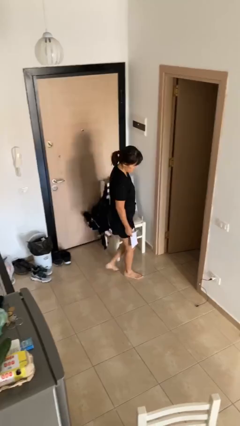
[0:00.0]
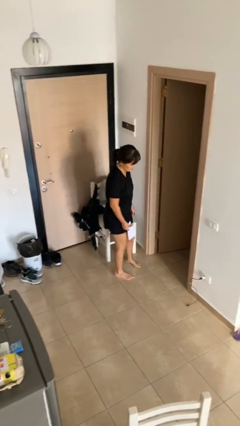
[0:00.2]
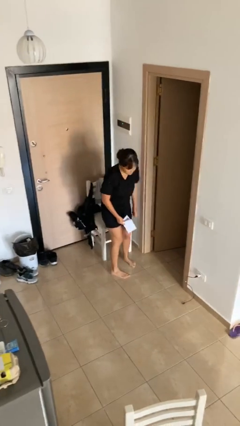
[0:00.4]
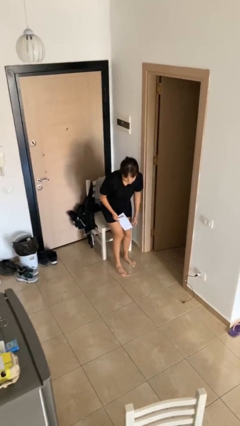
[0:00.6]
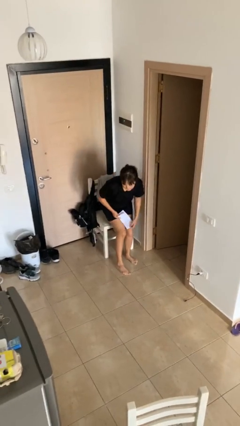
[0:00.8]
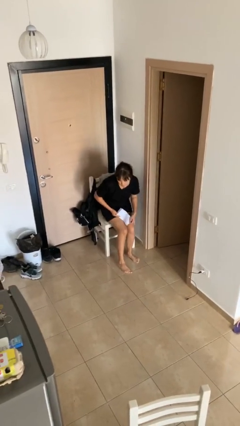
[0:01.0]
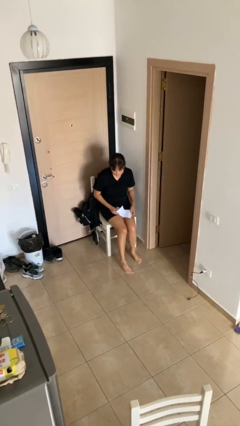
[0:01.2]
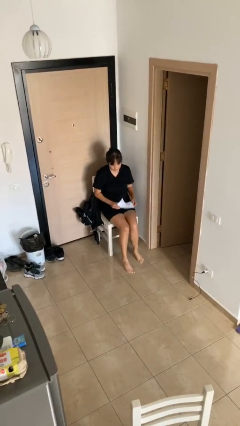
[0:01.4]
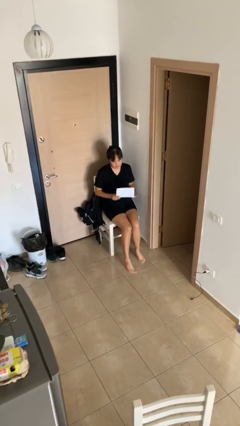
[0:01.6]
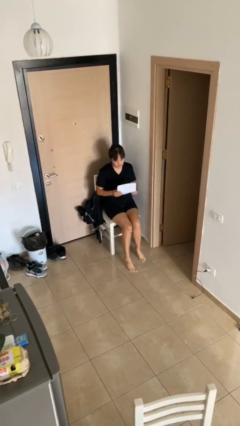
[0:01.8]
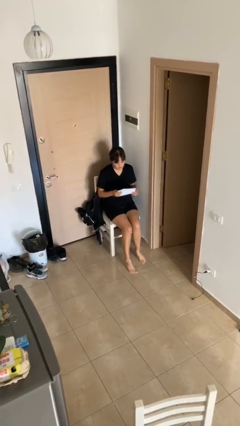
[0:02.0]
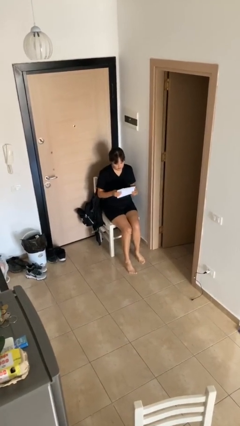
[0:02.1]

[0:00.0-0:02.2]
person sits down

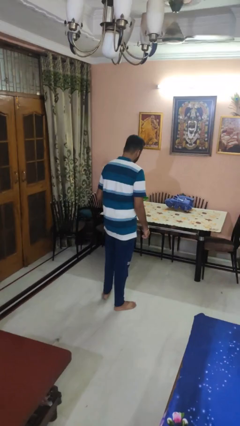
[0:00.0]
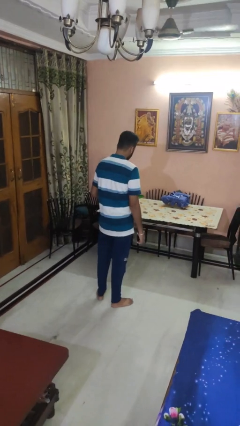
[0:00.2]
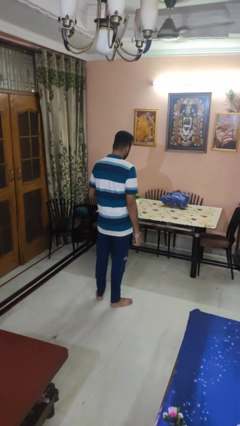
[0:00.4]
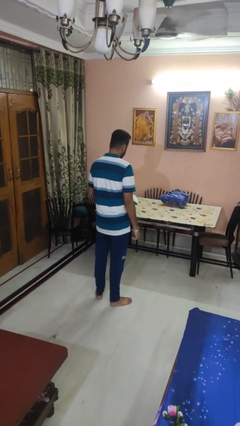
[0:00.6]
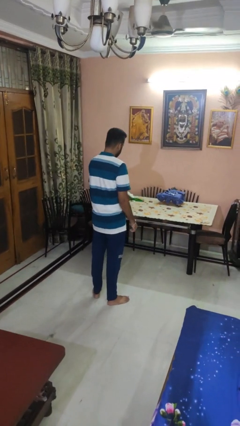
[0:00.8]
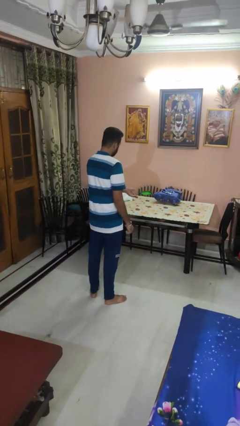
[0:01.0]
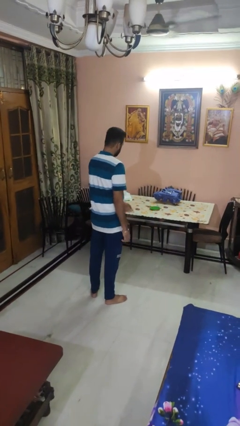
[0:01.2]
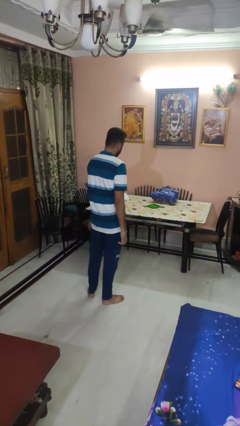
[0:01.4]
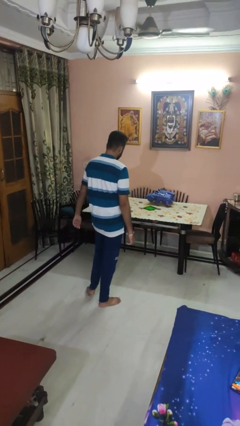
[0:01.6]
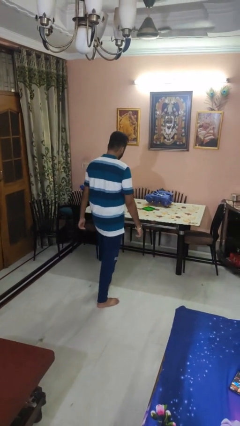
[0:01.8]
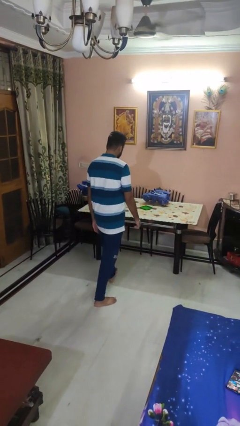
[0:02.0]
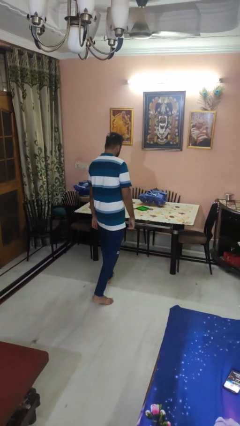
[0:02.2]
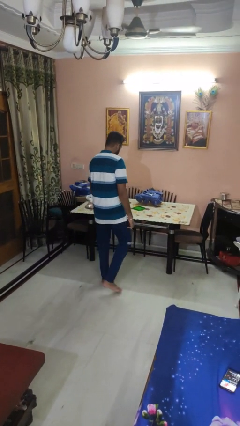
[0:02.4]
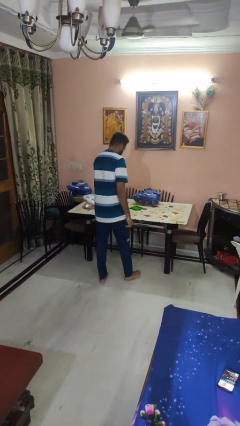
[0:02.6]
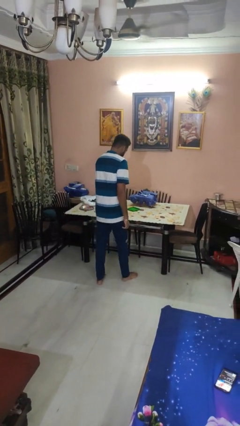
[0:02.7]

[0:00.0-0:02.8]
person throws object on table

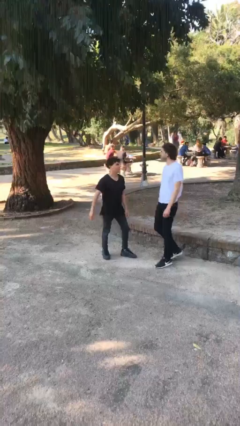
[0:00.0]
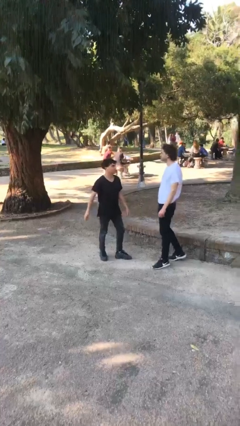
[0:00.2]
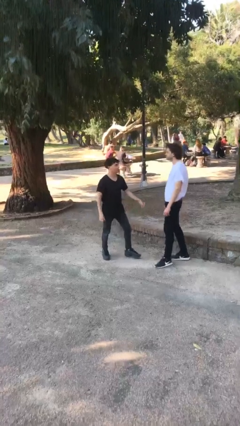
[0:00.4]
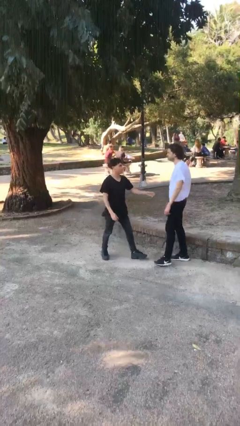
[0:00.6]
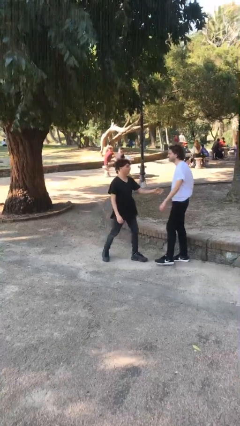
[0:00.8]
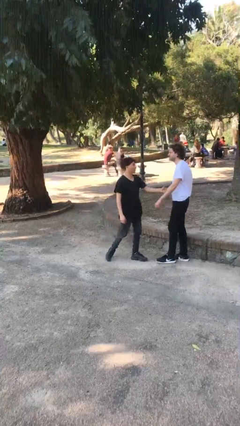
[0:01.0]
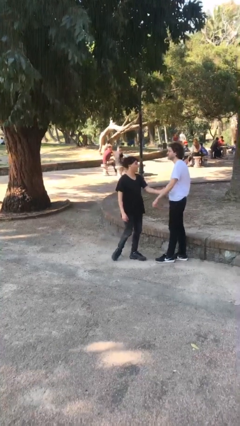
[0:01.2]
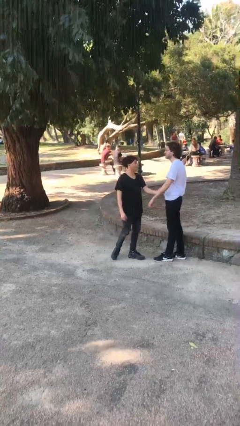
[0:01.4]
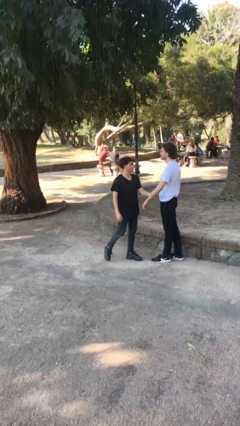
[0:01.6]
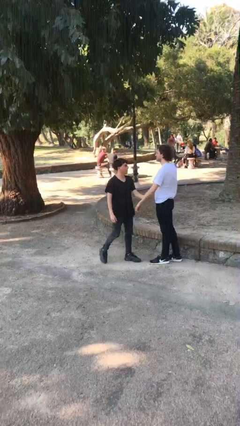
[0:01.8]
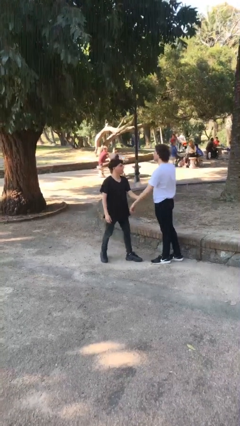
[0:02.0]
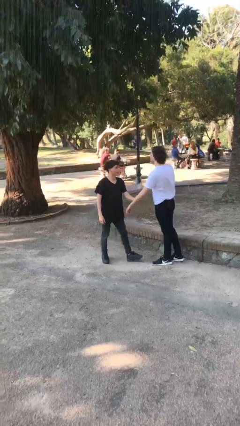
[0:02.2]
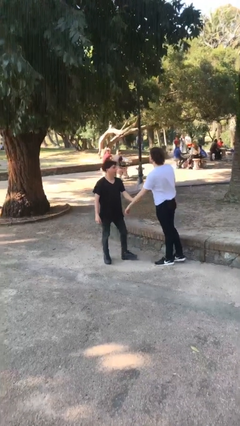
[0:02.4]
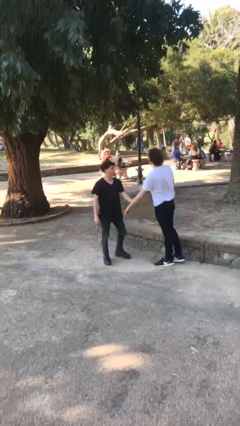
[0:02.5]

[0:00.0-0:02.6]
person grabs person by forearm

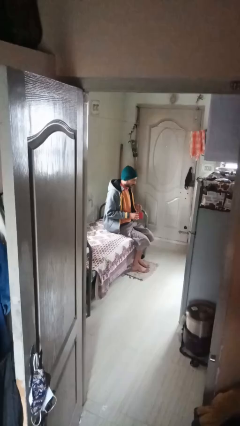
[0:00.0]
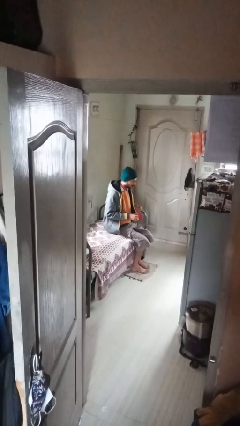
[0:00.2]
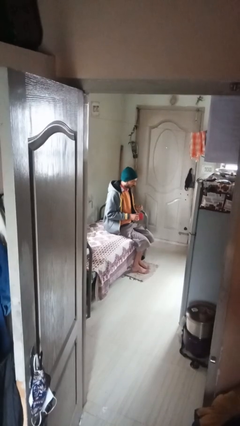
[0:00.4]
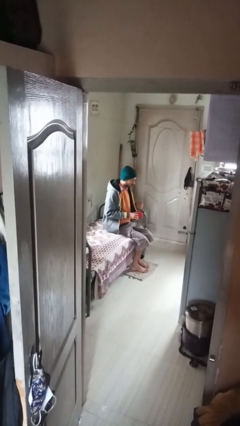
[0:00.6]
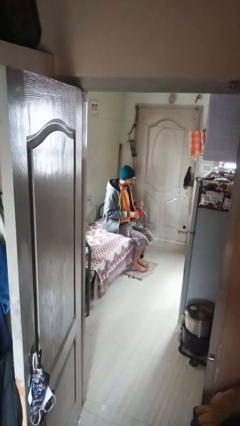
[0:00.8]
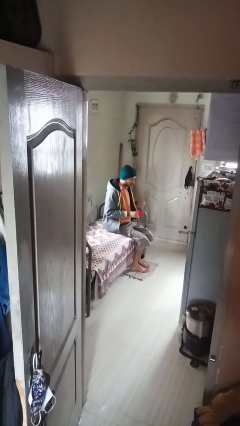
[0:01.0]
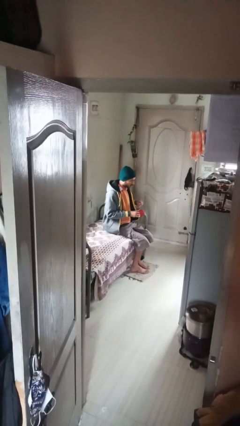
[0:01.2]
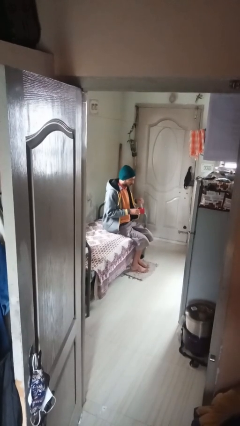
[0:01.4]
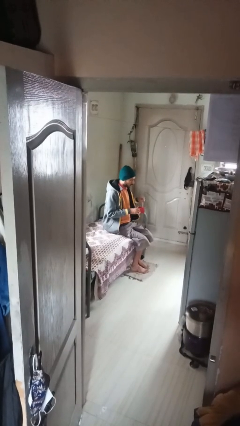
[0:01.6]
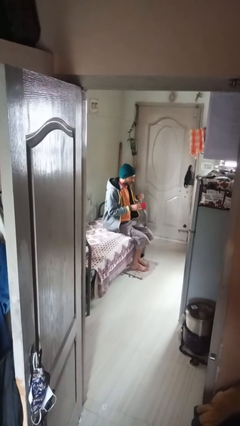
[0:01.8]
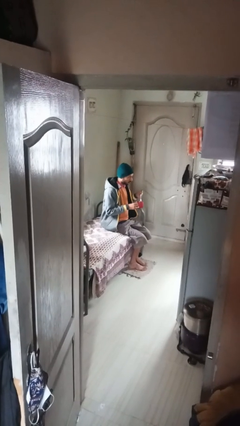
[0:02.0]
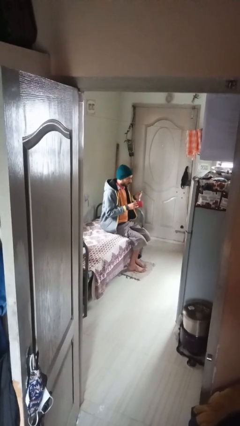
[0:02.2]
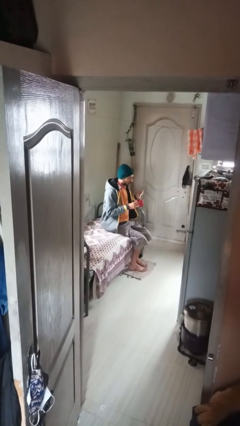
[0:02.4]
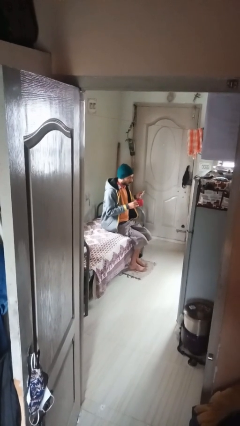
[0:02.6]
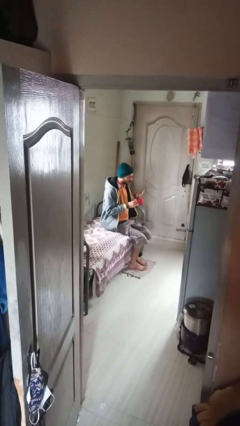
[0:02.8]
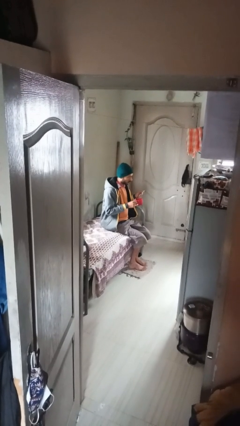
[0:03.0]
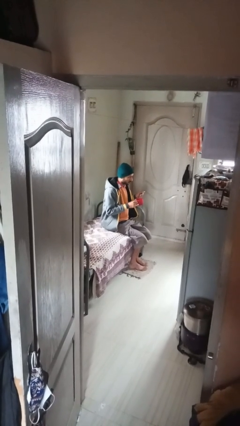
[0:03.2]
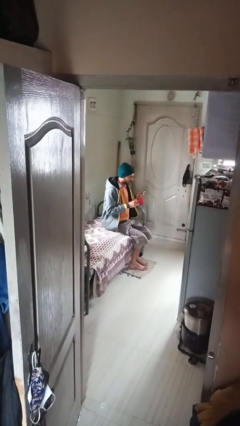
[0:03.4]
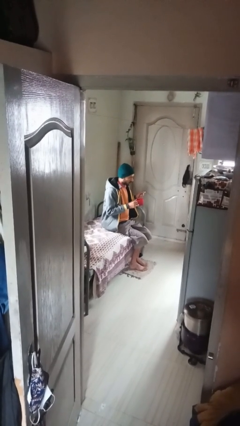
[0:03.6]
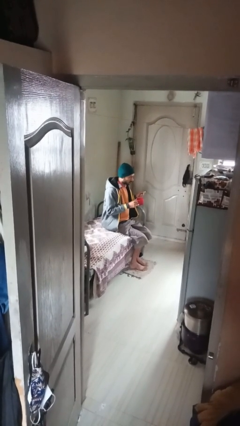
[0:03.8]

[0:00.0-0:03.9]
person stirs mug

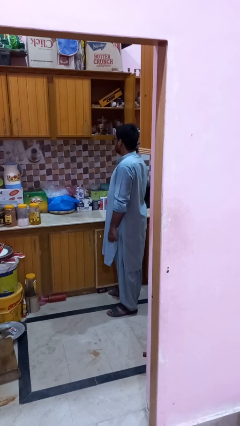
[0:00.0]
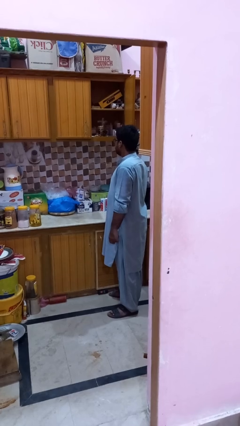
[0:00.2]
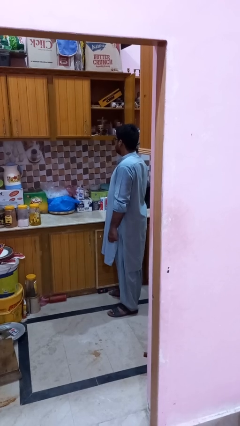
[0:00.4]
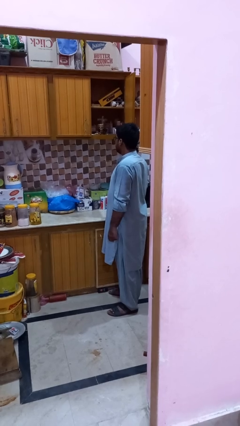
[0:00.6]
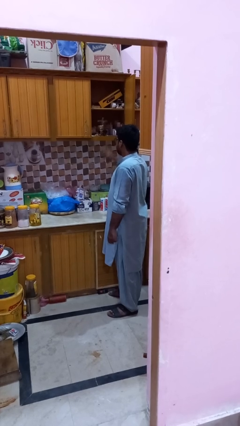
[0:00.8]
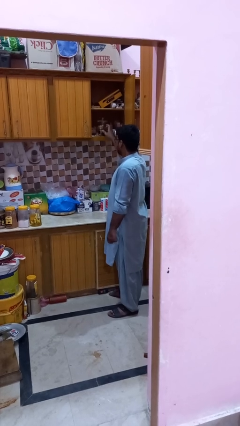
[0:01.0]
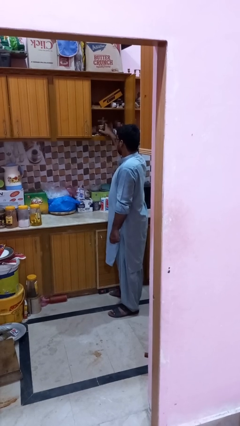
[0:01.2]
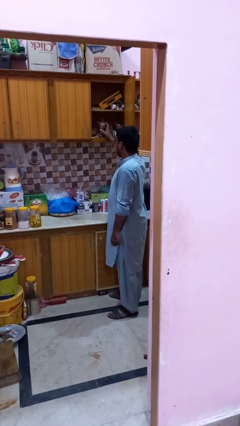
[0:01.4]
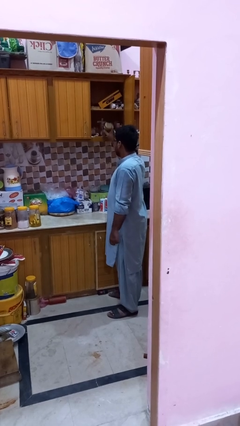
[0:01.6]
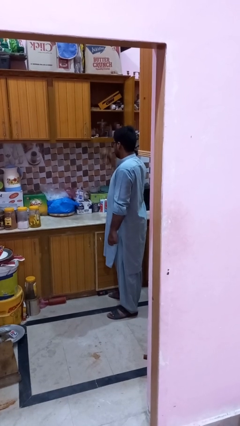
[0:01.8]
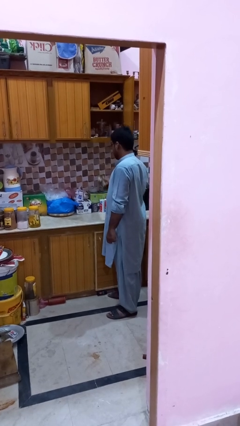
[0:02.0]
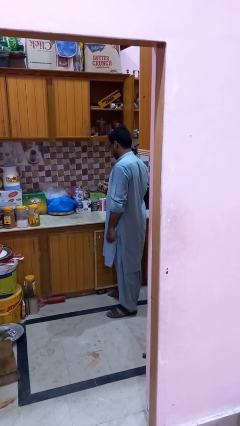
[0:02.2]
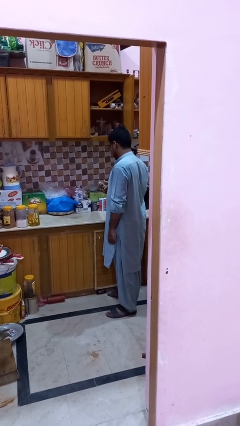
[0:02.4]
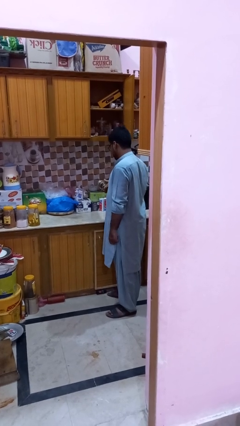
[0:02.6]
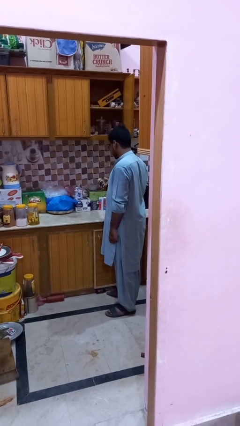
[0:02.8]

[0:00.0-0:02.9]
person picks up object from cabinet

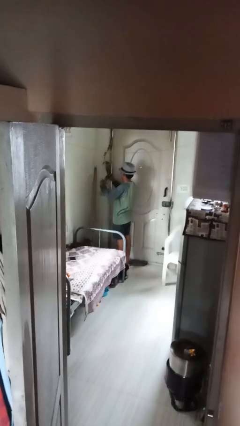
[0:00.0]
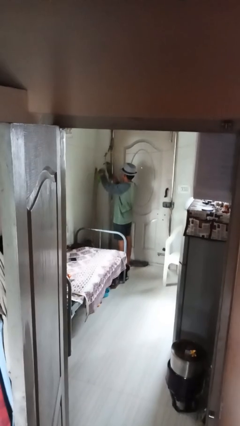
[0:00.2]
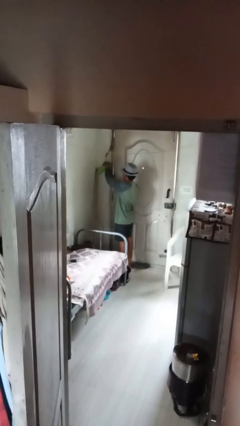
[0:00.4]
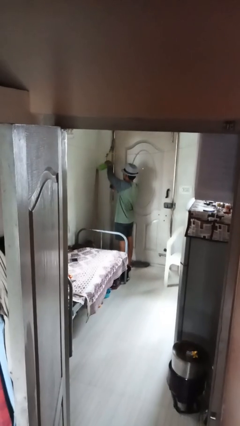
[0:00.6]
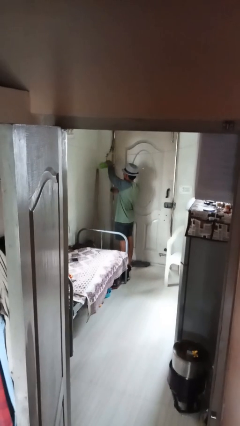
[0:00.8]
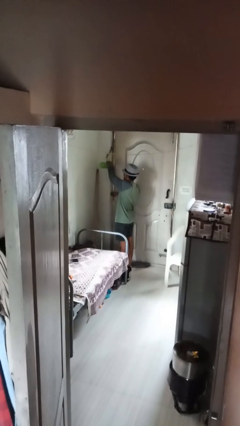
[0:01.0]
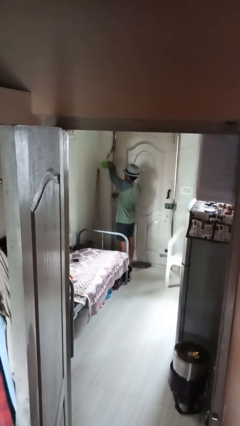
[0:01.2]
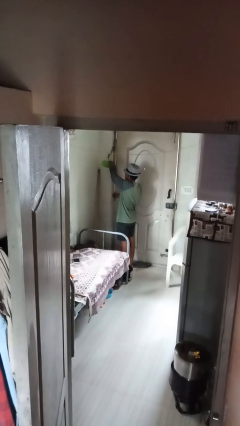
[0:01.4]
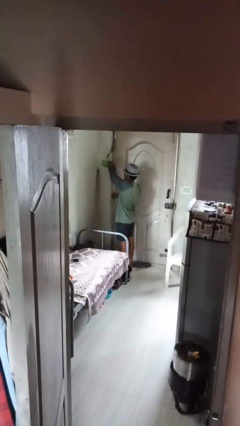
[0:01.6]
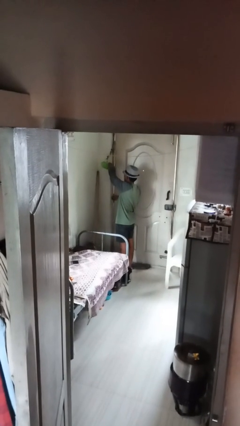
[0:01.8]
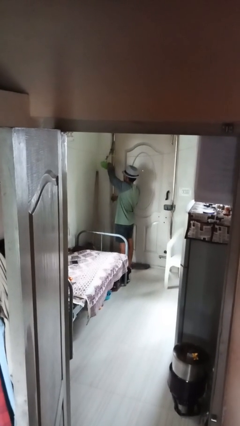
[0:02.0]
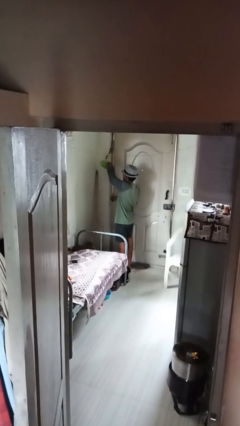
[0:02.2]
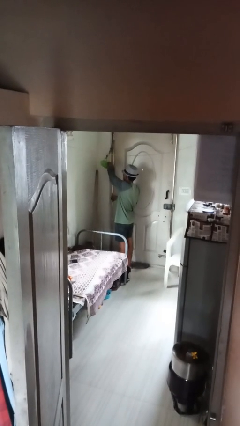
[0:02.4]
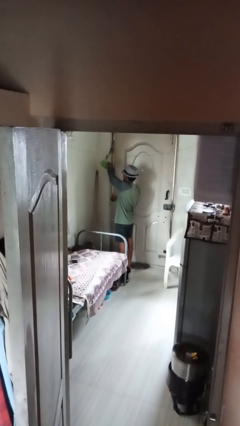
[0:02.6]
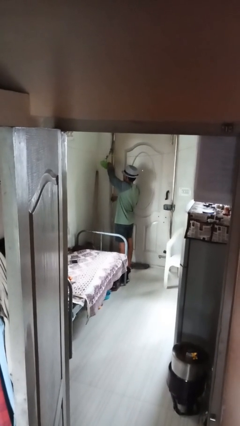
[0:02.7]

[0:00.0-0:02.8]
person waters houseplant

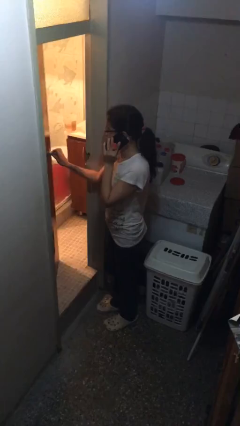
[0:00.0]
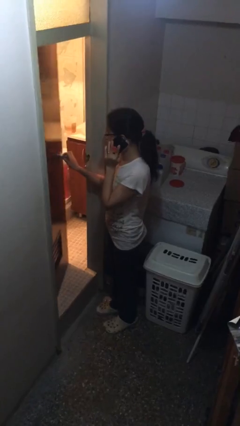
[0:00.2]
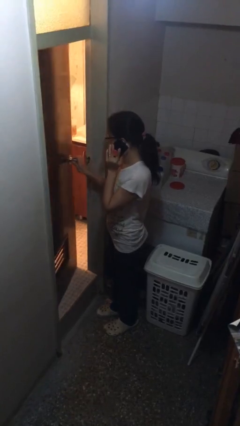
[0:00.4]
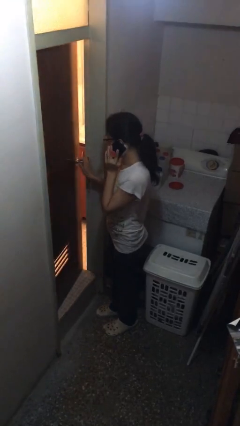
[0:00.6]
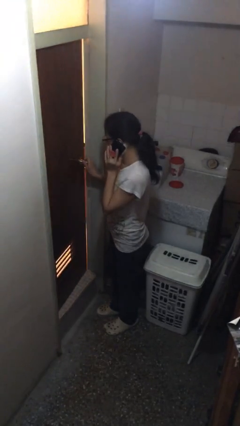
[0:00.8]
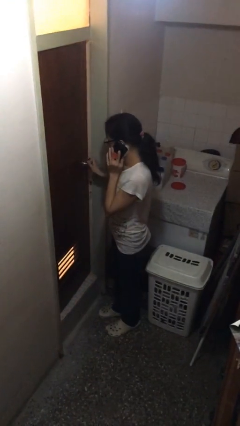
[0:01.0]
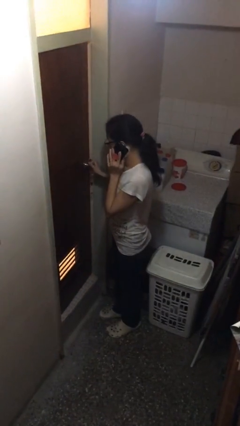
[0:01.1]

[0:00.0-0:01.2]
person closes facility door
